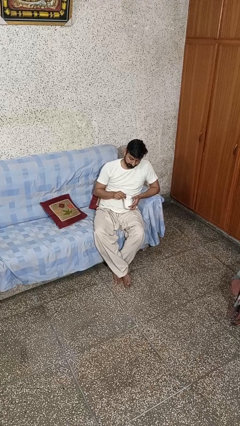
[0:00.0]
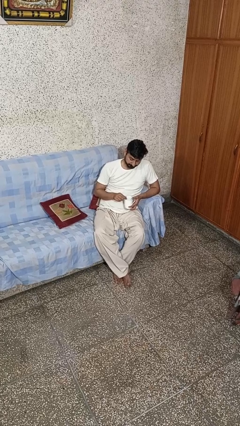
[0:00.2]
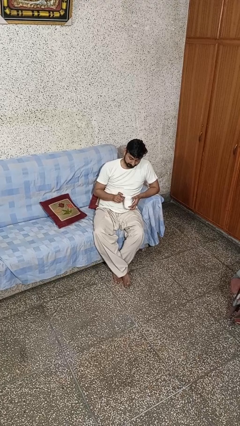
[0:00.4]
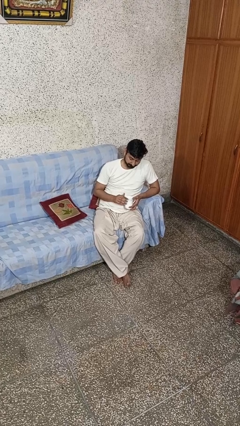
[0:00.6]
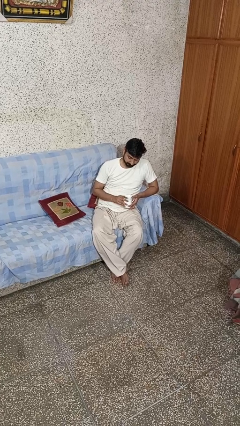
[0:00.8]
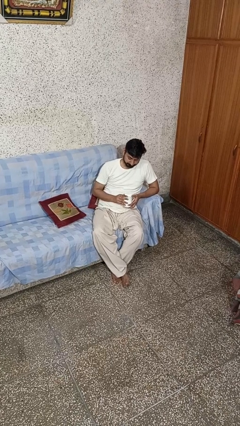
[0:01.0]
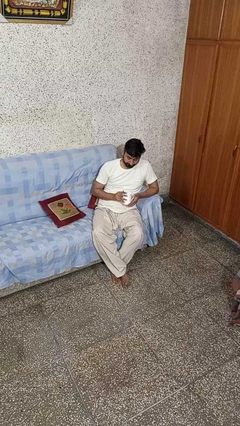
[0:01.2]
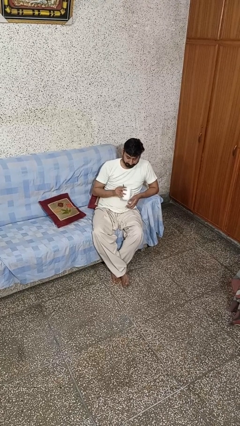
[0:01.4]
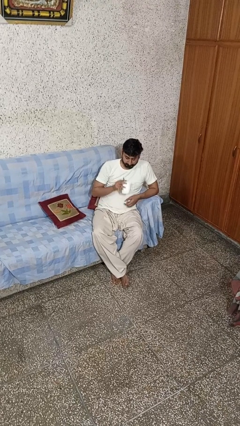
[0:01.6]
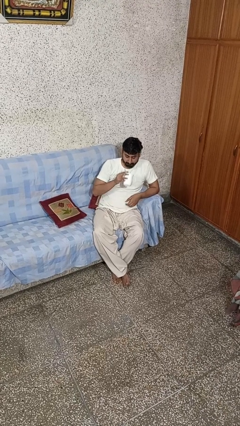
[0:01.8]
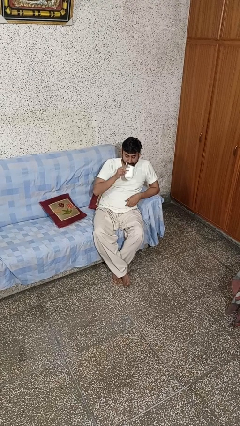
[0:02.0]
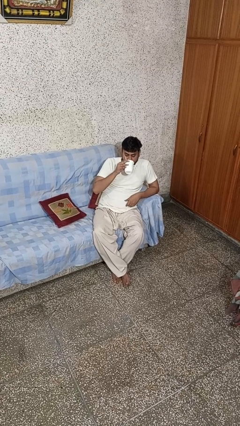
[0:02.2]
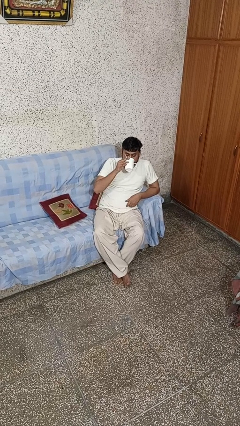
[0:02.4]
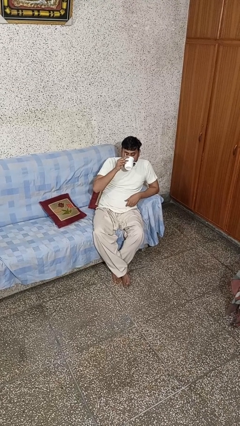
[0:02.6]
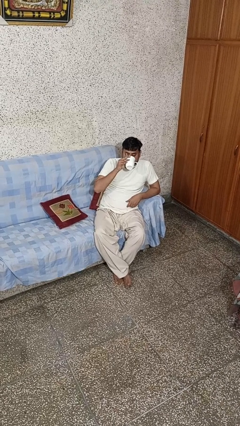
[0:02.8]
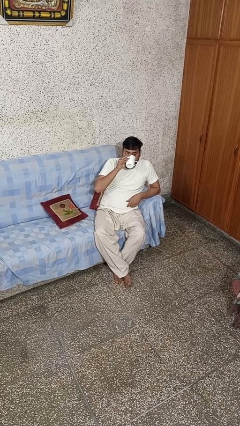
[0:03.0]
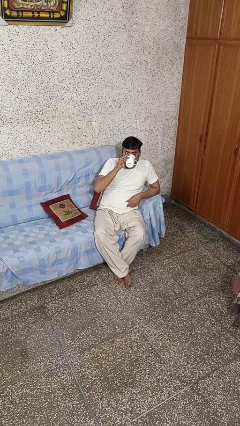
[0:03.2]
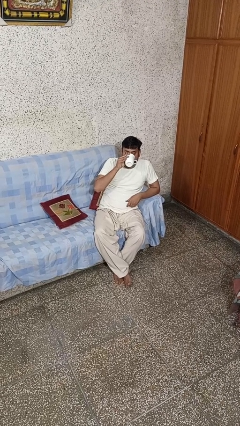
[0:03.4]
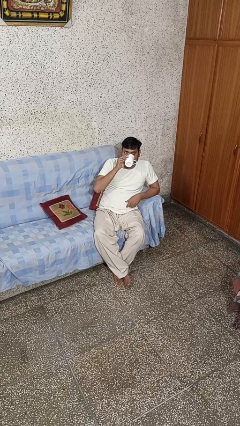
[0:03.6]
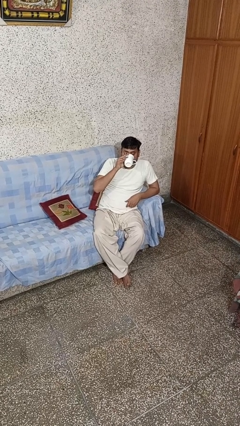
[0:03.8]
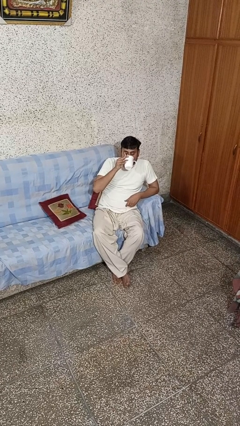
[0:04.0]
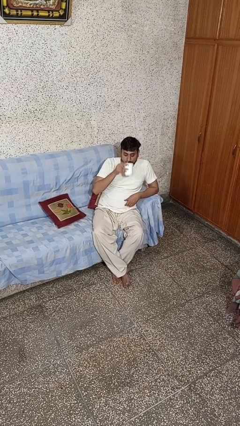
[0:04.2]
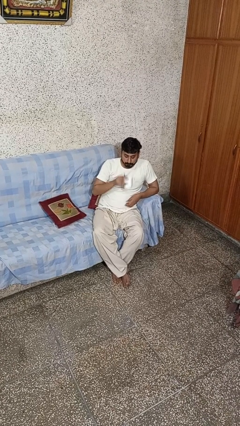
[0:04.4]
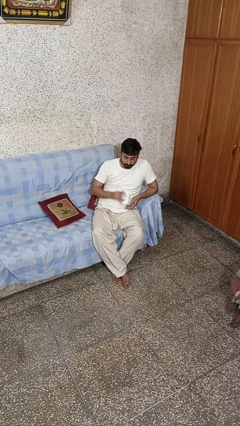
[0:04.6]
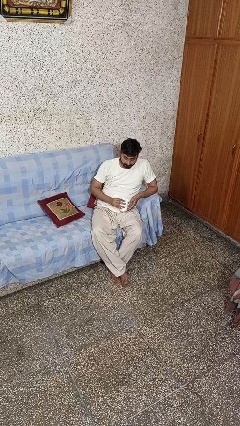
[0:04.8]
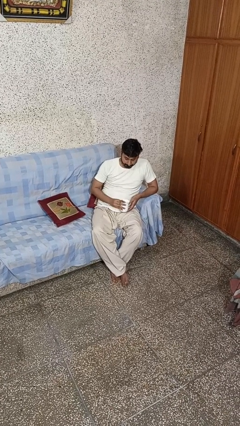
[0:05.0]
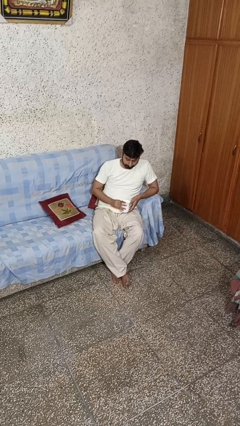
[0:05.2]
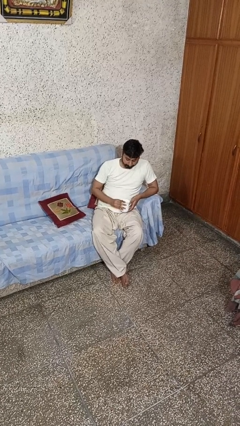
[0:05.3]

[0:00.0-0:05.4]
person drinks from mug

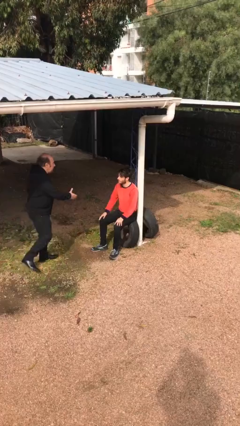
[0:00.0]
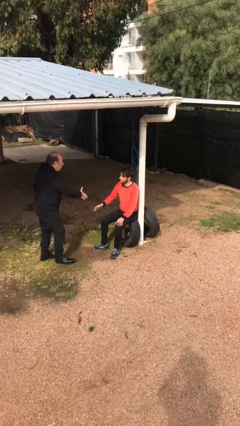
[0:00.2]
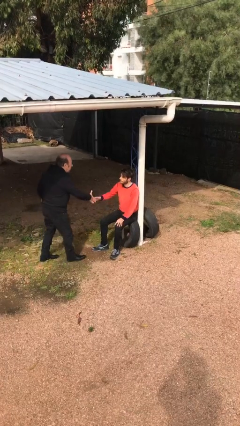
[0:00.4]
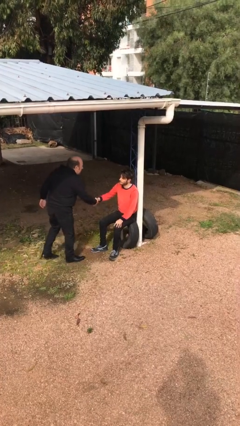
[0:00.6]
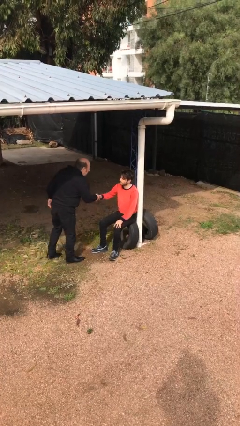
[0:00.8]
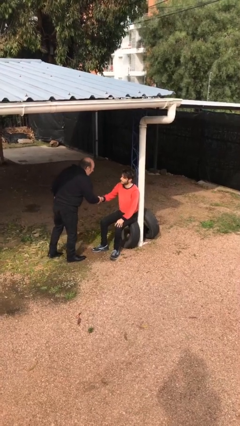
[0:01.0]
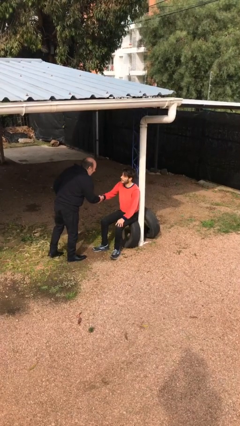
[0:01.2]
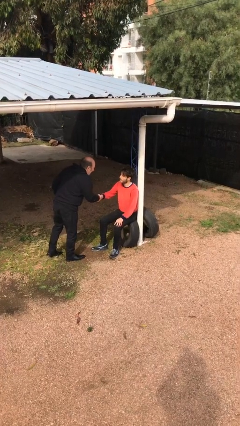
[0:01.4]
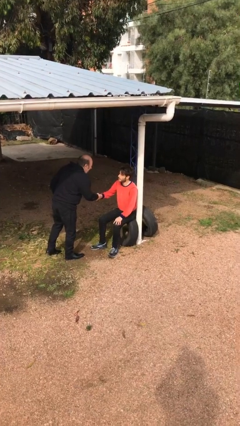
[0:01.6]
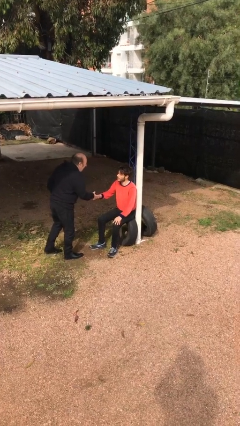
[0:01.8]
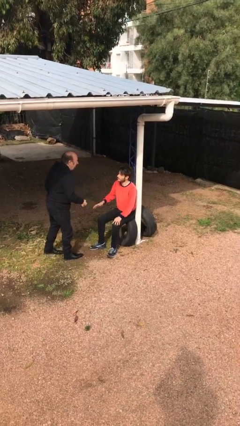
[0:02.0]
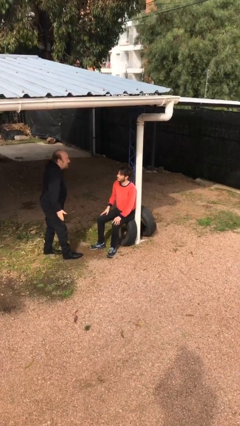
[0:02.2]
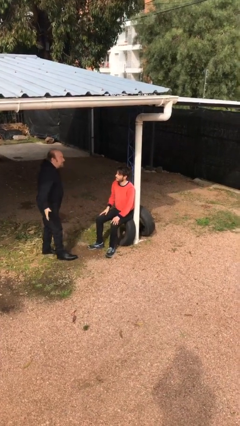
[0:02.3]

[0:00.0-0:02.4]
person shakes hand

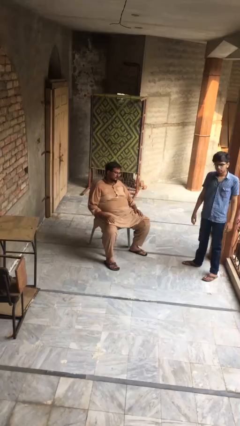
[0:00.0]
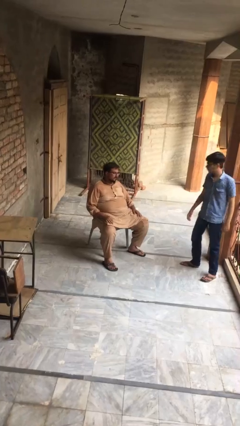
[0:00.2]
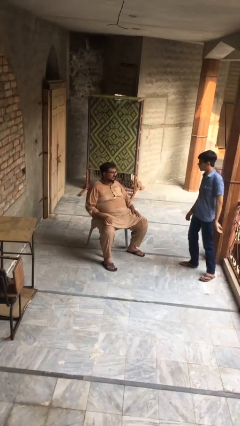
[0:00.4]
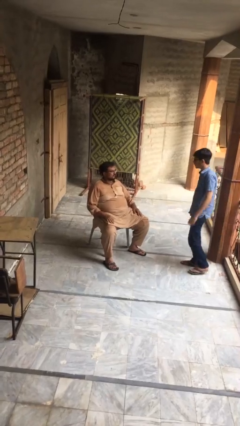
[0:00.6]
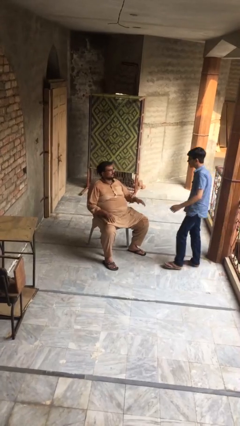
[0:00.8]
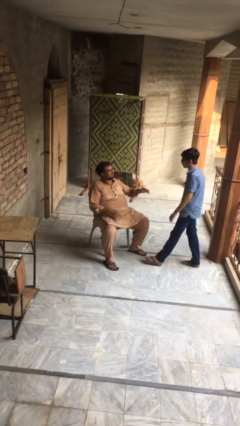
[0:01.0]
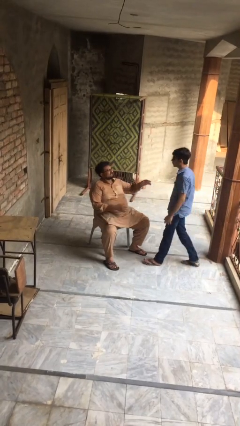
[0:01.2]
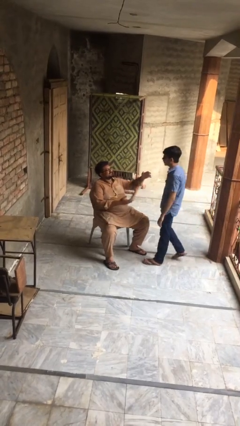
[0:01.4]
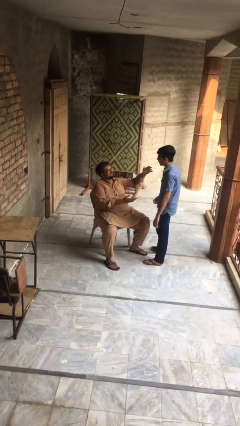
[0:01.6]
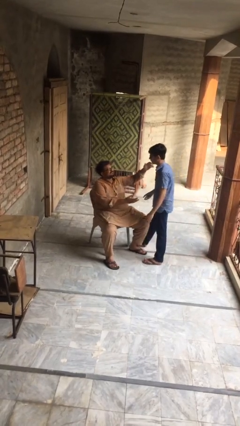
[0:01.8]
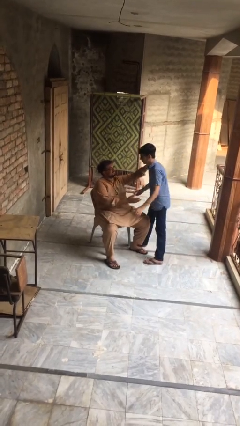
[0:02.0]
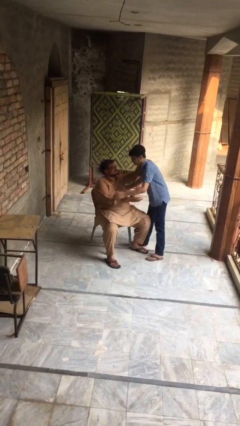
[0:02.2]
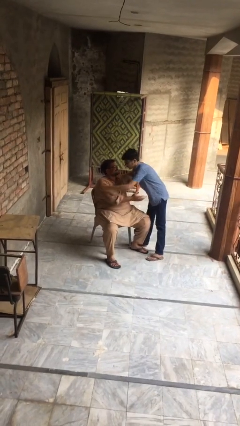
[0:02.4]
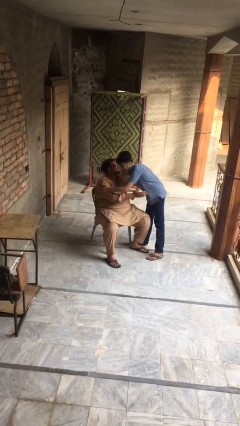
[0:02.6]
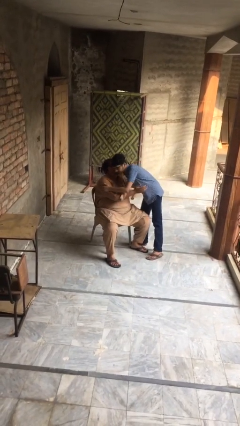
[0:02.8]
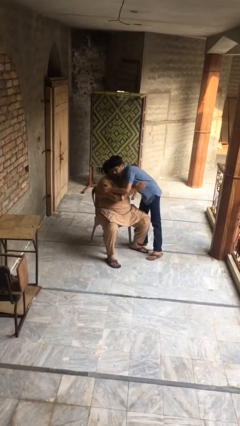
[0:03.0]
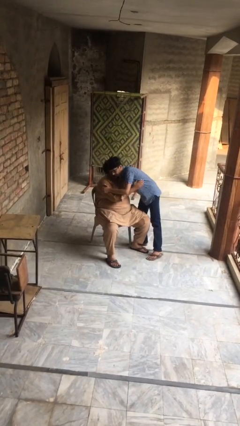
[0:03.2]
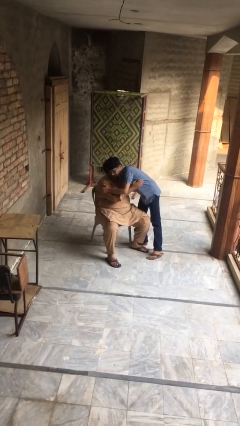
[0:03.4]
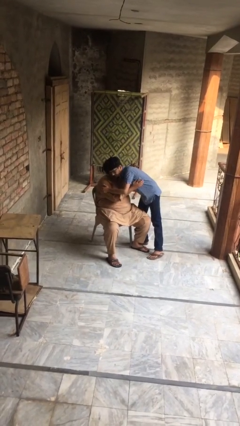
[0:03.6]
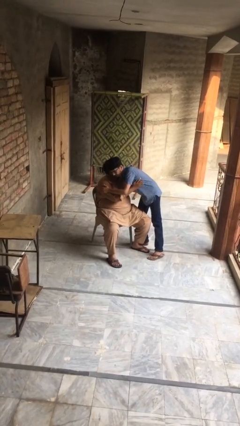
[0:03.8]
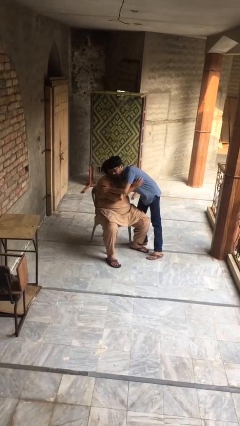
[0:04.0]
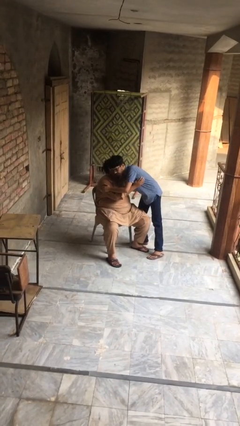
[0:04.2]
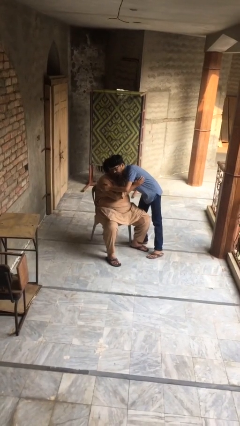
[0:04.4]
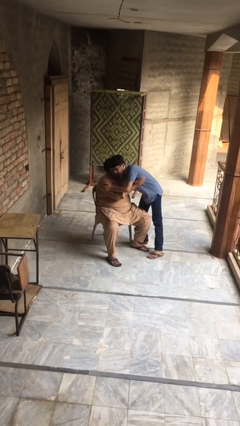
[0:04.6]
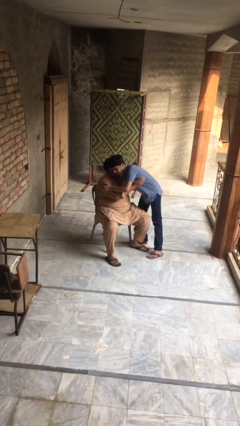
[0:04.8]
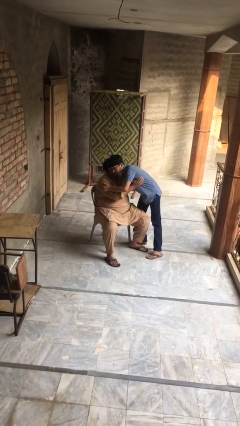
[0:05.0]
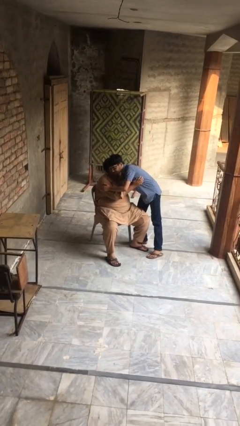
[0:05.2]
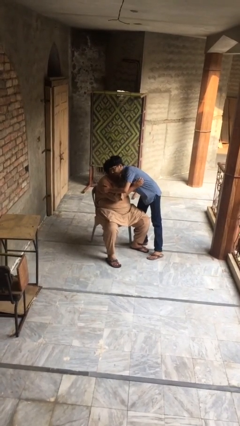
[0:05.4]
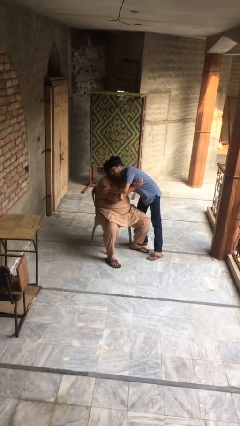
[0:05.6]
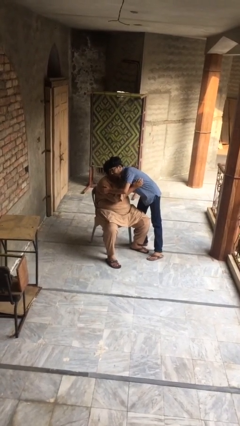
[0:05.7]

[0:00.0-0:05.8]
person embraces person

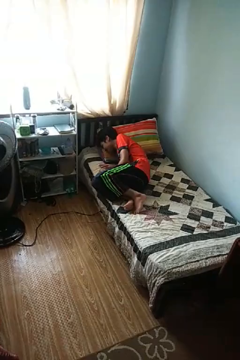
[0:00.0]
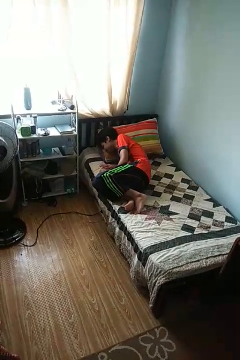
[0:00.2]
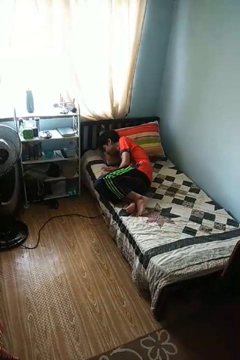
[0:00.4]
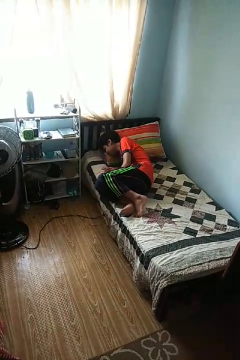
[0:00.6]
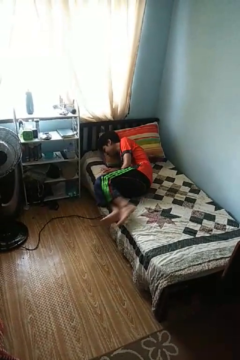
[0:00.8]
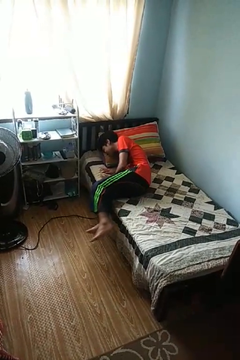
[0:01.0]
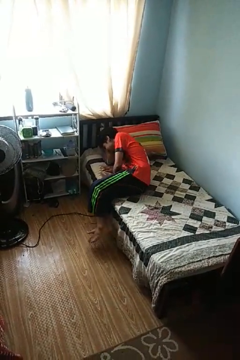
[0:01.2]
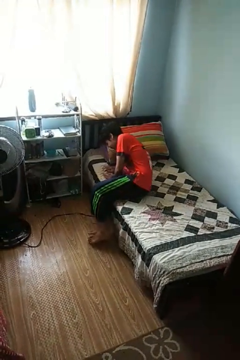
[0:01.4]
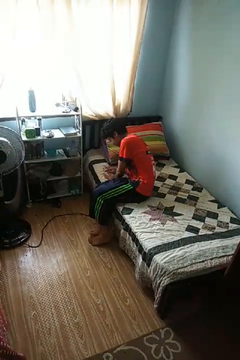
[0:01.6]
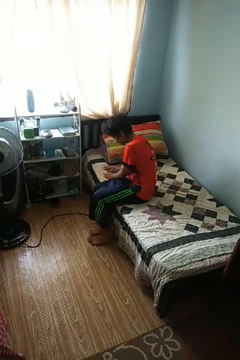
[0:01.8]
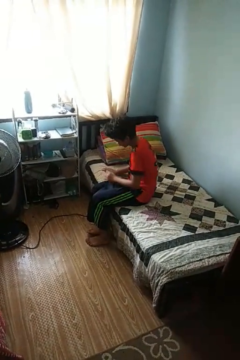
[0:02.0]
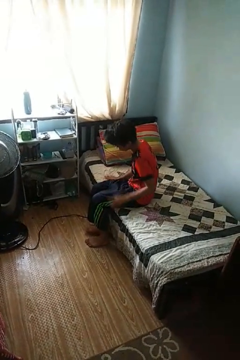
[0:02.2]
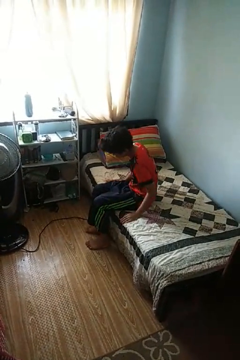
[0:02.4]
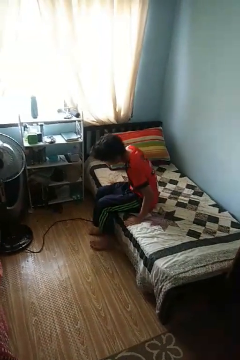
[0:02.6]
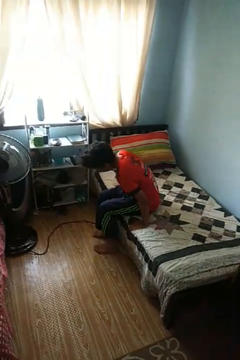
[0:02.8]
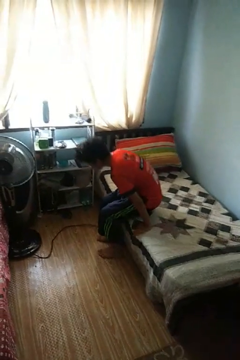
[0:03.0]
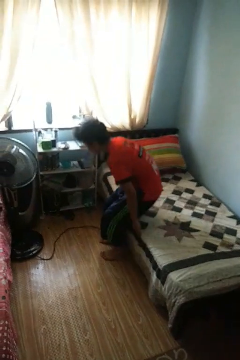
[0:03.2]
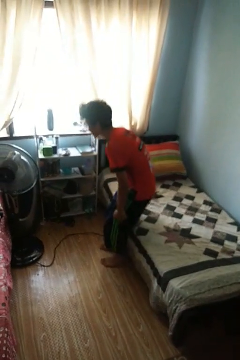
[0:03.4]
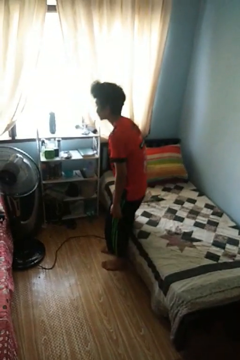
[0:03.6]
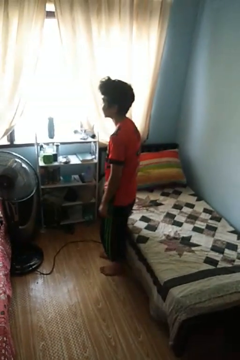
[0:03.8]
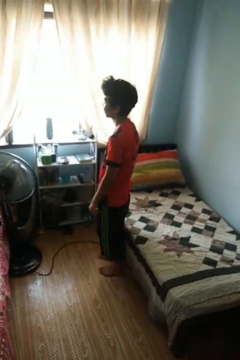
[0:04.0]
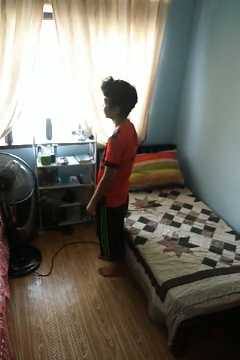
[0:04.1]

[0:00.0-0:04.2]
person stands up

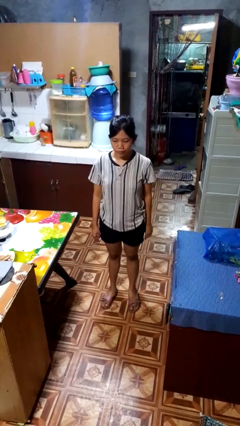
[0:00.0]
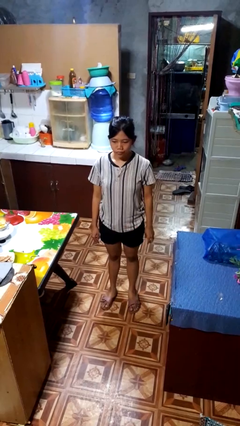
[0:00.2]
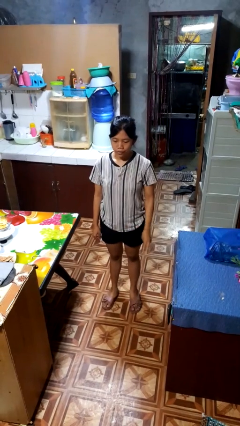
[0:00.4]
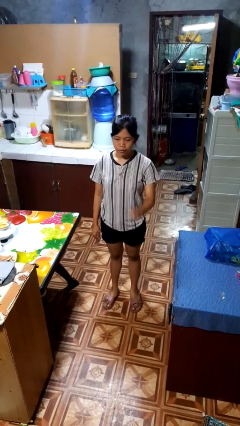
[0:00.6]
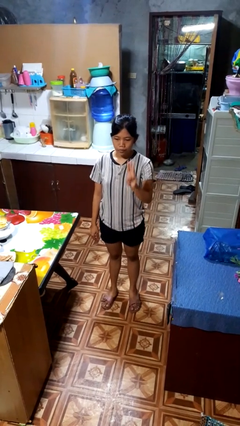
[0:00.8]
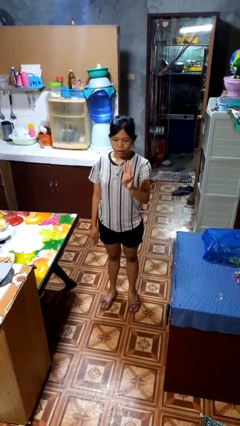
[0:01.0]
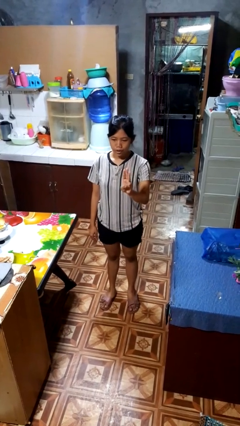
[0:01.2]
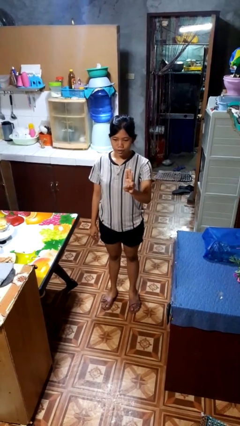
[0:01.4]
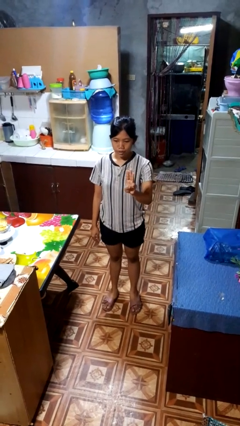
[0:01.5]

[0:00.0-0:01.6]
person gestures number three
